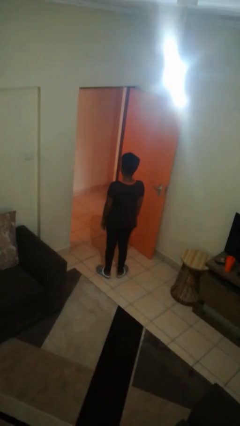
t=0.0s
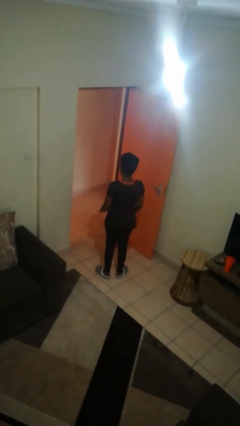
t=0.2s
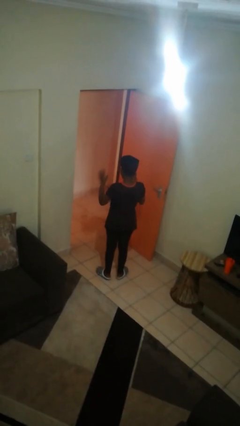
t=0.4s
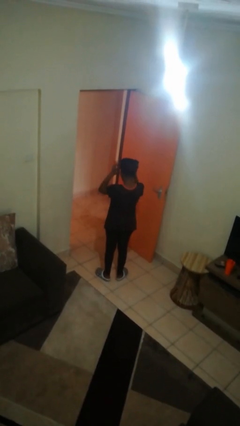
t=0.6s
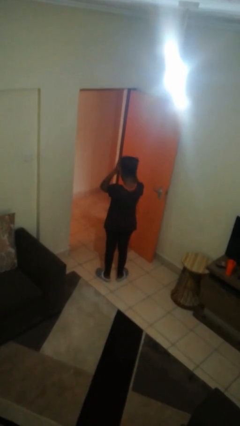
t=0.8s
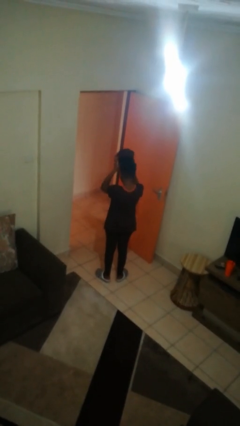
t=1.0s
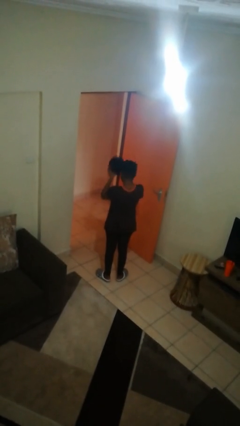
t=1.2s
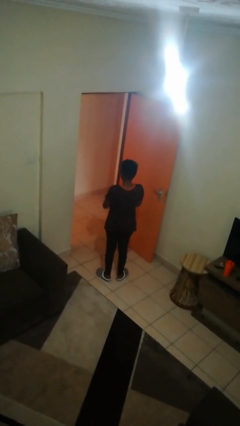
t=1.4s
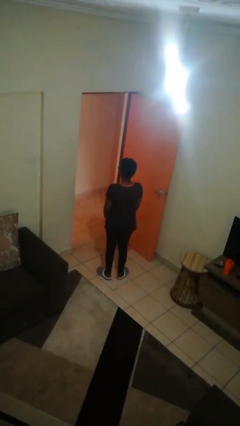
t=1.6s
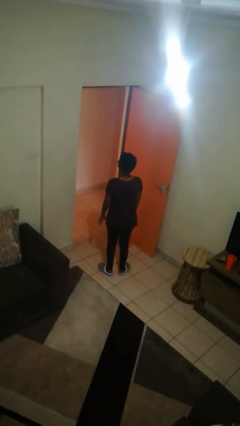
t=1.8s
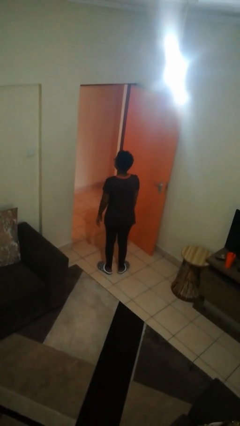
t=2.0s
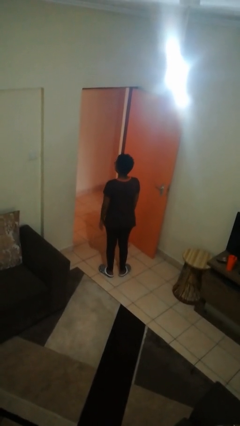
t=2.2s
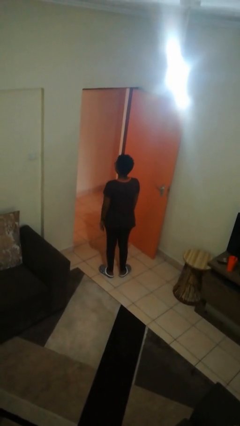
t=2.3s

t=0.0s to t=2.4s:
person takes off hat

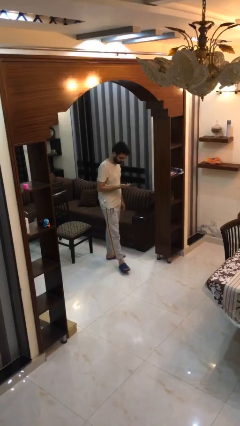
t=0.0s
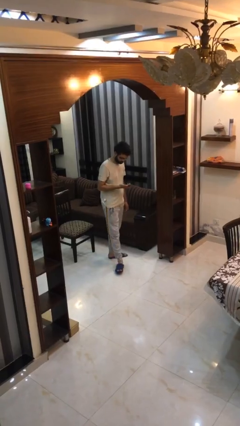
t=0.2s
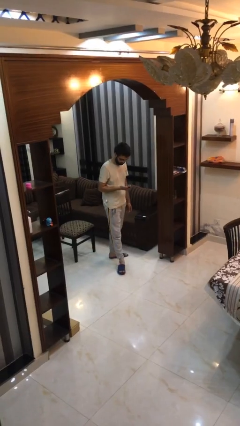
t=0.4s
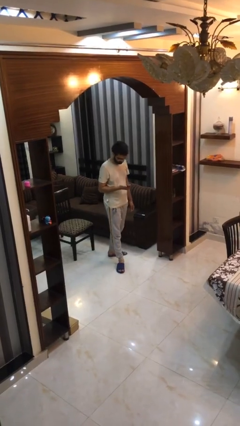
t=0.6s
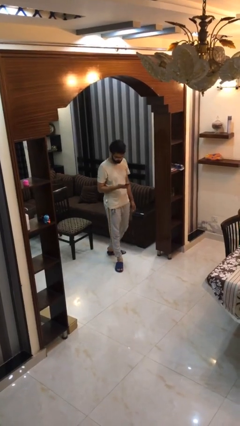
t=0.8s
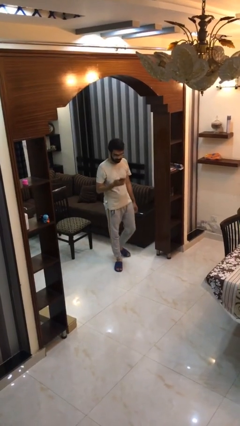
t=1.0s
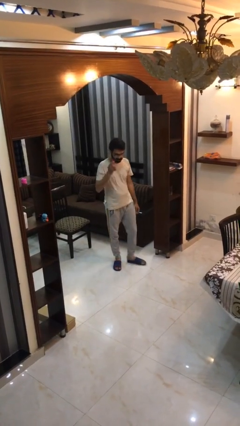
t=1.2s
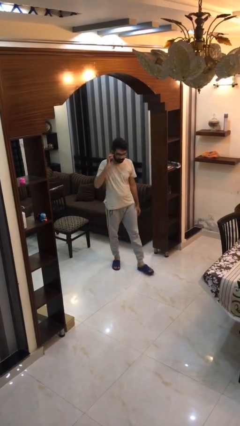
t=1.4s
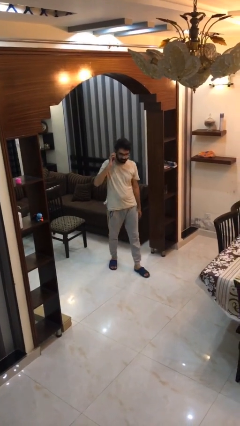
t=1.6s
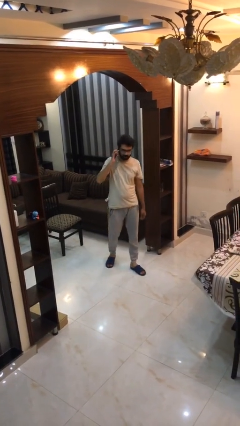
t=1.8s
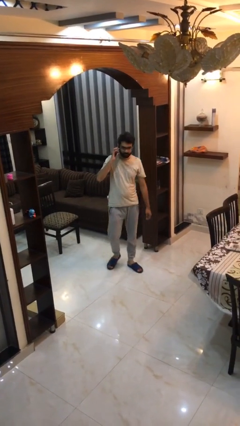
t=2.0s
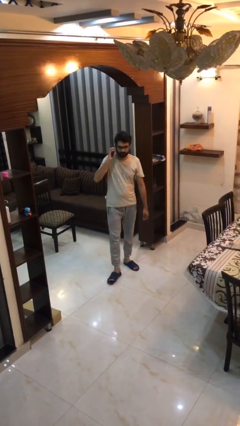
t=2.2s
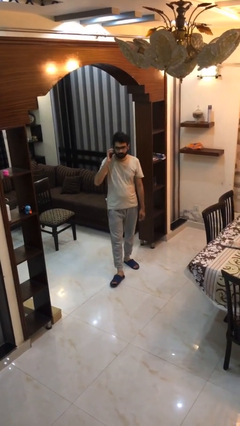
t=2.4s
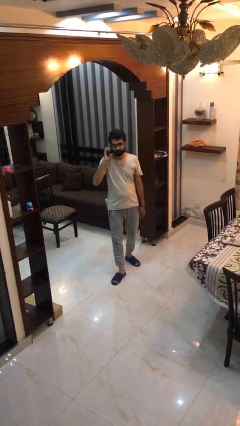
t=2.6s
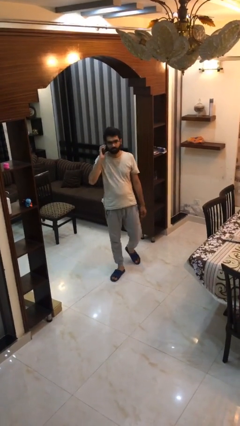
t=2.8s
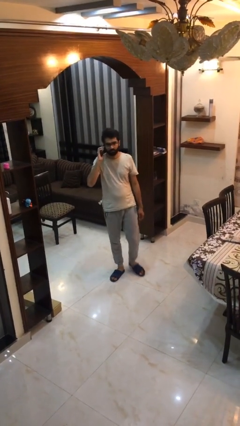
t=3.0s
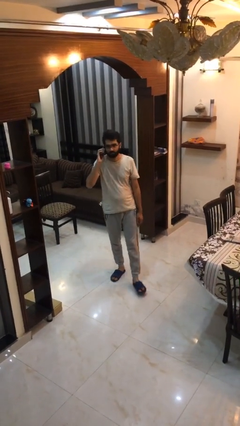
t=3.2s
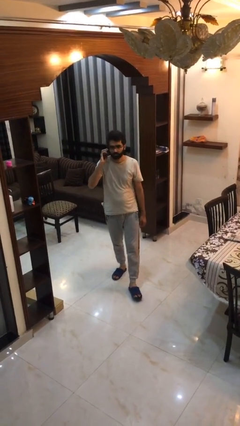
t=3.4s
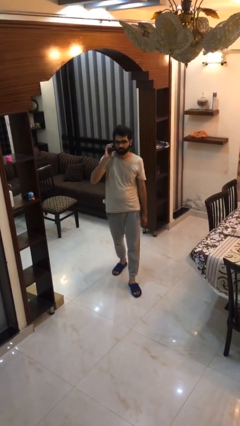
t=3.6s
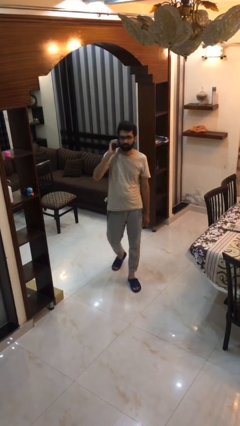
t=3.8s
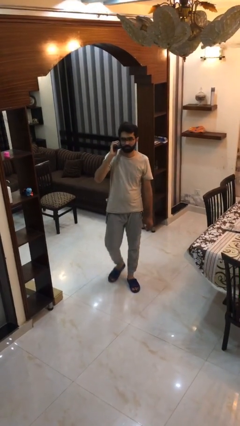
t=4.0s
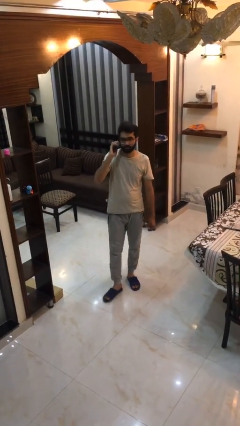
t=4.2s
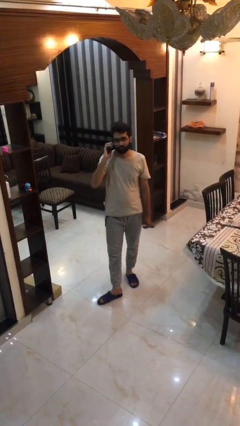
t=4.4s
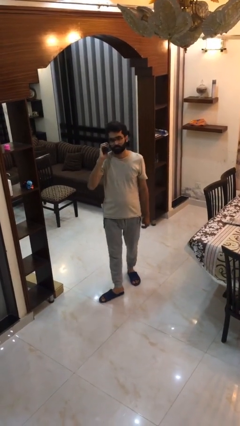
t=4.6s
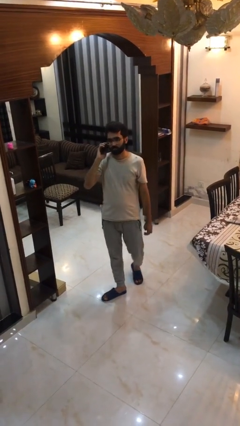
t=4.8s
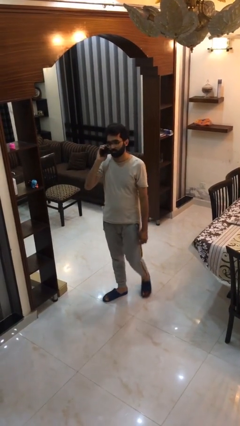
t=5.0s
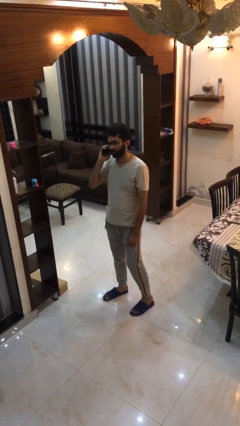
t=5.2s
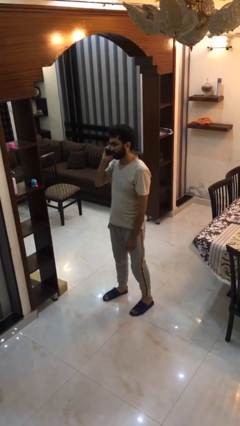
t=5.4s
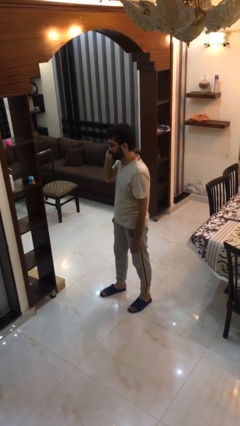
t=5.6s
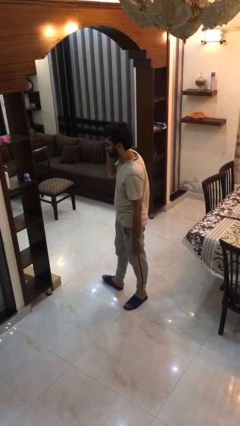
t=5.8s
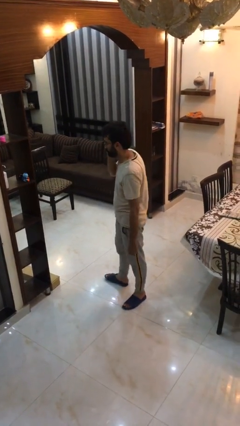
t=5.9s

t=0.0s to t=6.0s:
person talks on phone

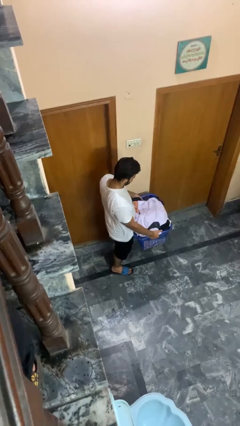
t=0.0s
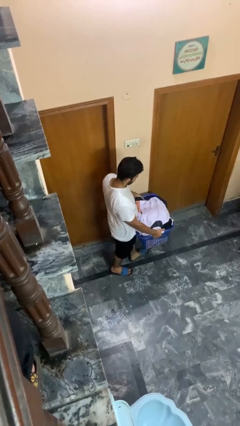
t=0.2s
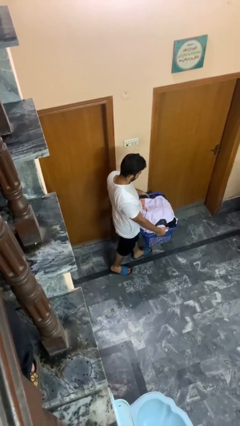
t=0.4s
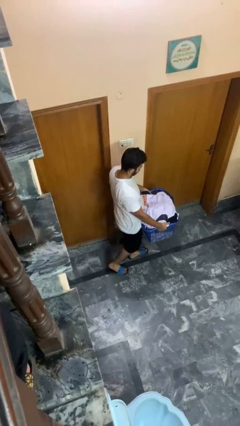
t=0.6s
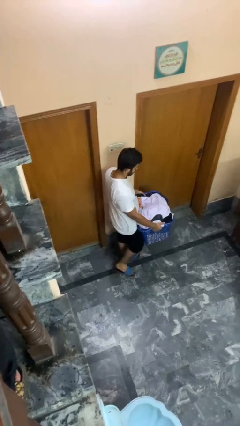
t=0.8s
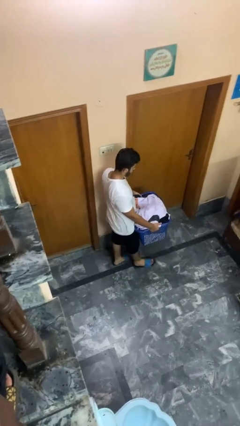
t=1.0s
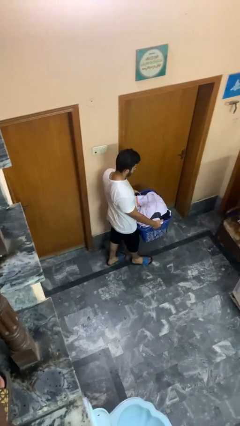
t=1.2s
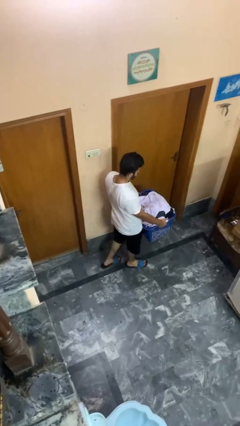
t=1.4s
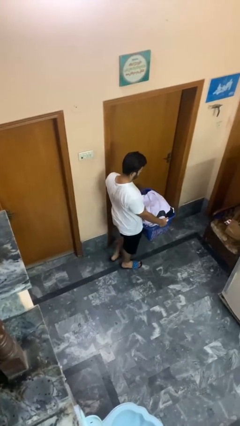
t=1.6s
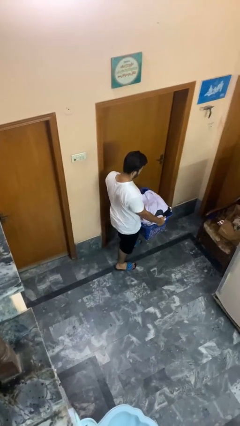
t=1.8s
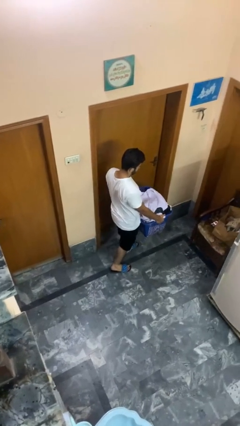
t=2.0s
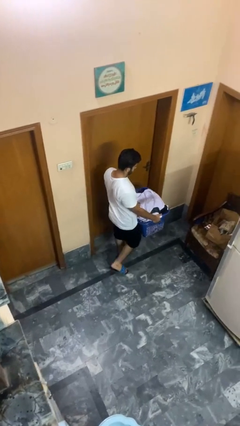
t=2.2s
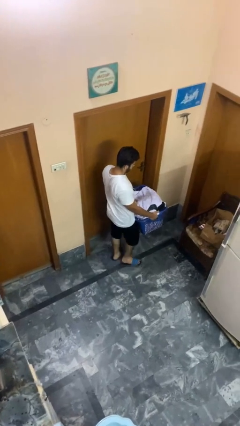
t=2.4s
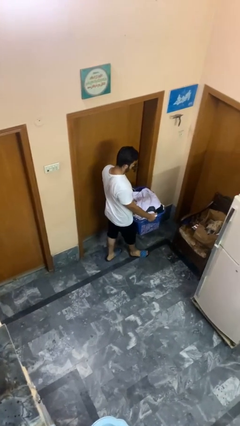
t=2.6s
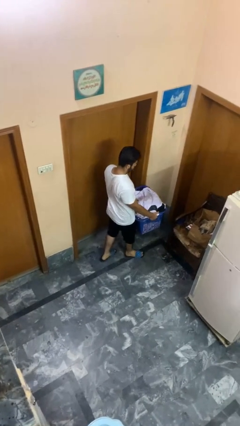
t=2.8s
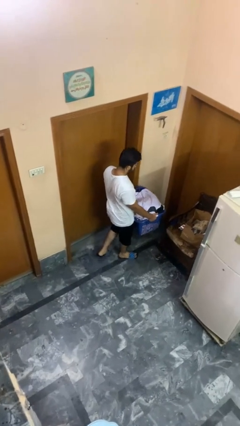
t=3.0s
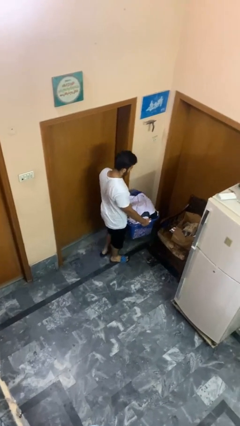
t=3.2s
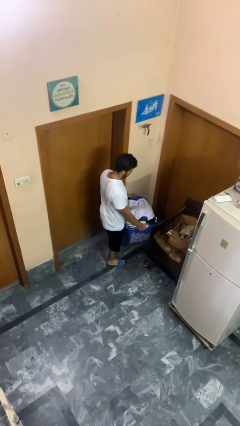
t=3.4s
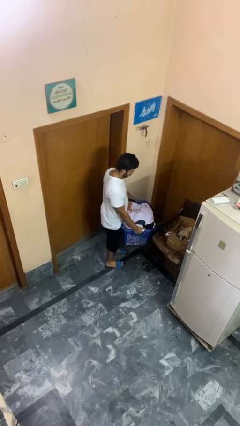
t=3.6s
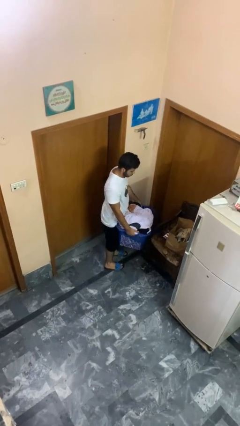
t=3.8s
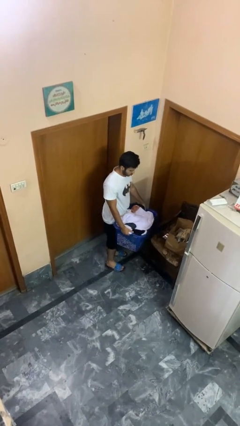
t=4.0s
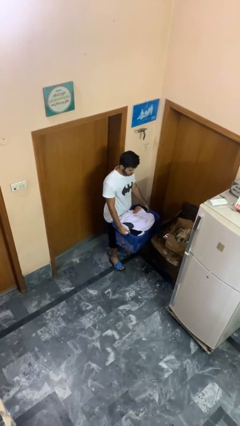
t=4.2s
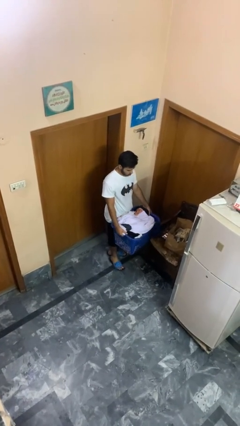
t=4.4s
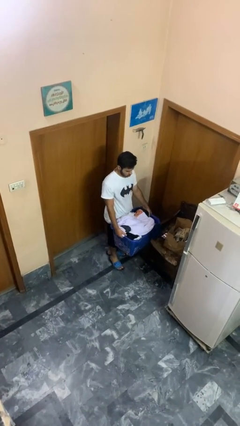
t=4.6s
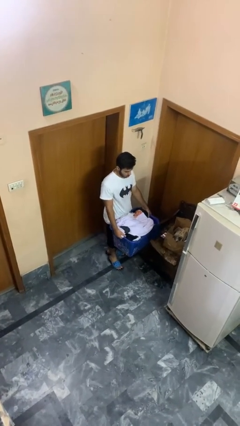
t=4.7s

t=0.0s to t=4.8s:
person carries laundry basket

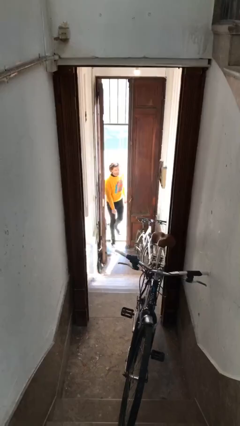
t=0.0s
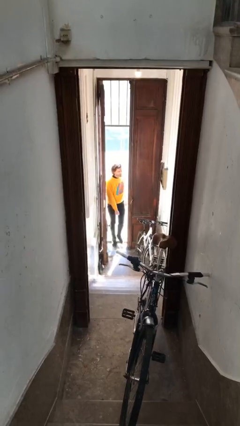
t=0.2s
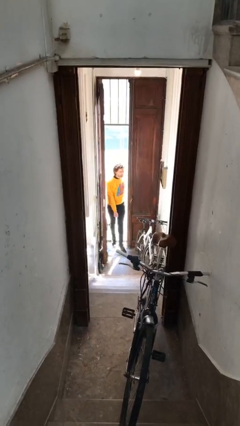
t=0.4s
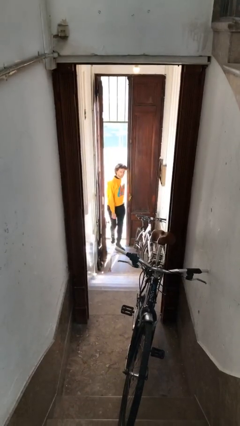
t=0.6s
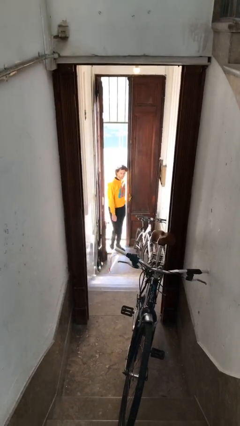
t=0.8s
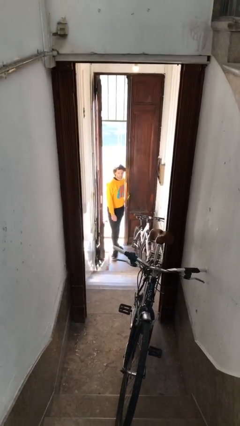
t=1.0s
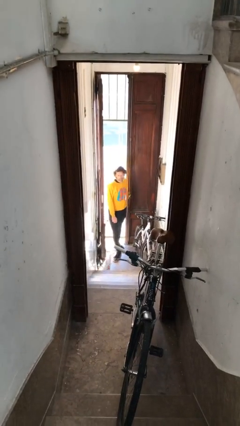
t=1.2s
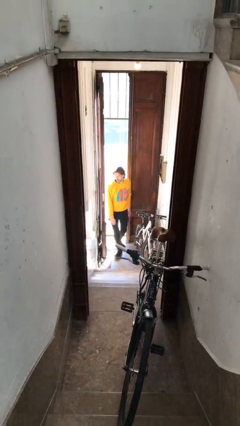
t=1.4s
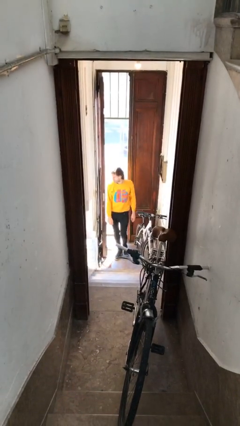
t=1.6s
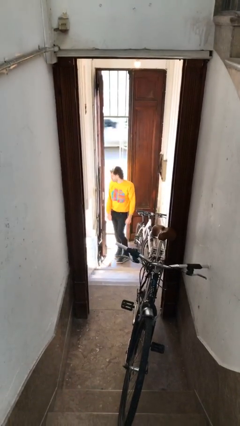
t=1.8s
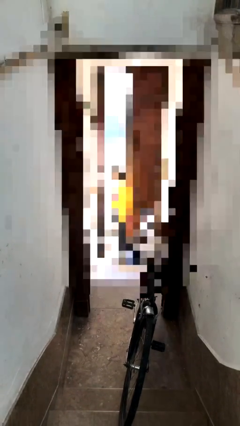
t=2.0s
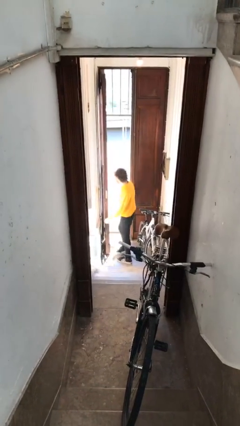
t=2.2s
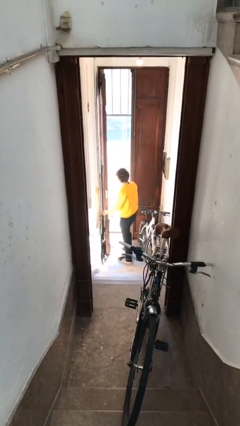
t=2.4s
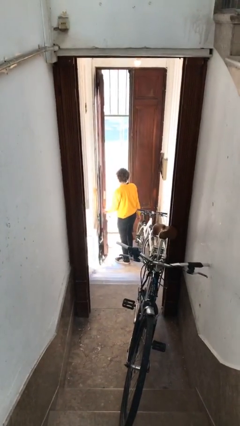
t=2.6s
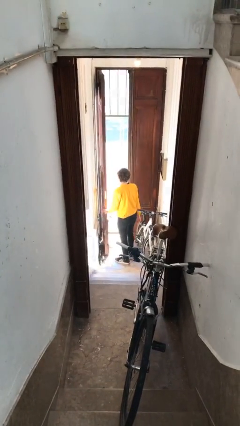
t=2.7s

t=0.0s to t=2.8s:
person enters scene through structure

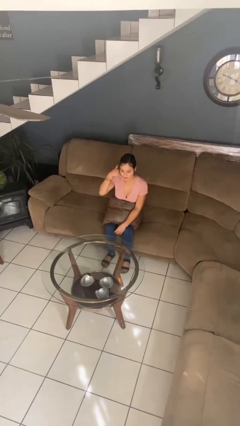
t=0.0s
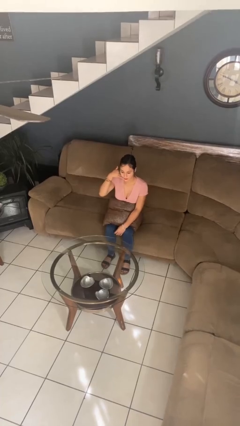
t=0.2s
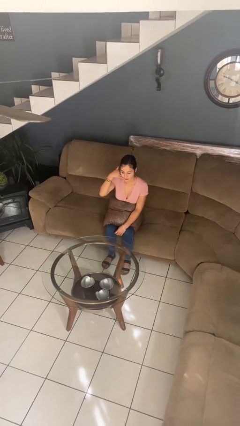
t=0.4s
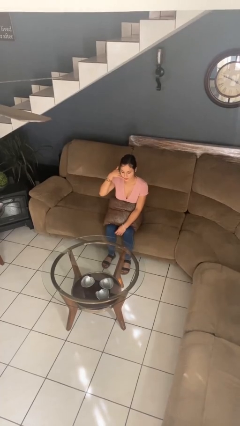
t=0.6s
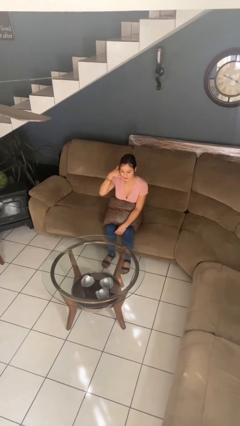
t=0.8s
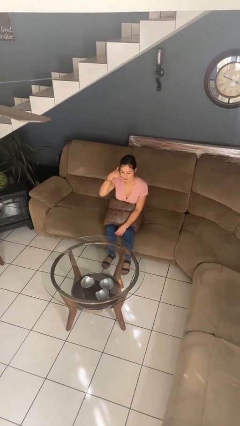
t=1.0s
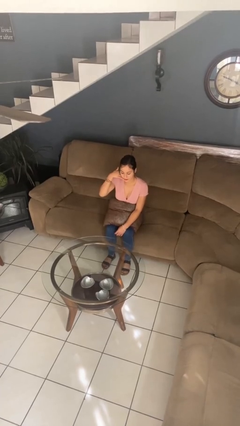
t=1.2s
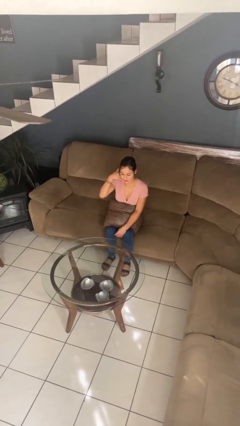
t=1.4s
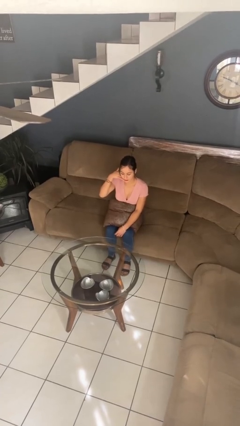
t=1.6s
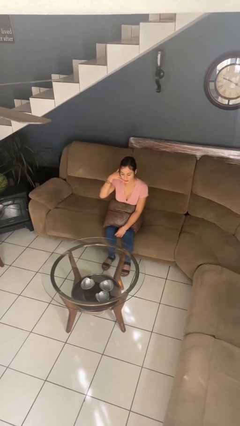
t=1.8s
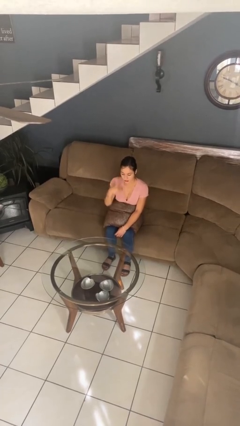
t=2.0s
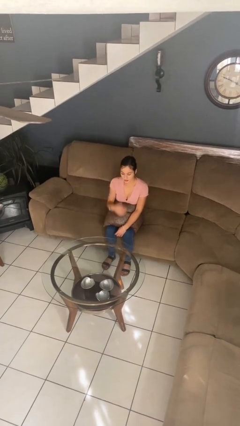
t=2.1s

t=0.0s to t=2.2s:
person gestures call me
